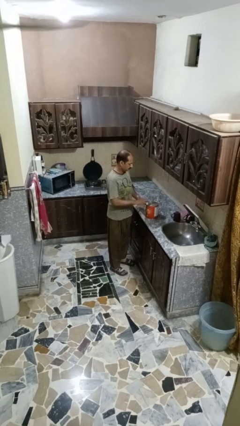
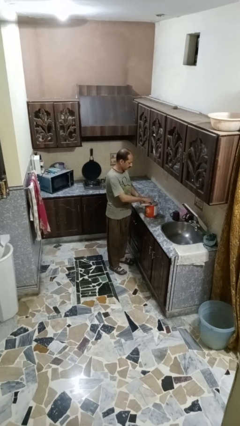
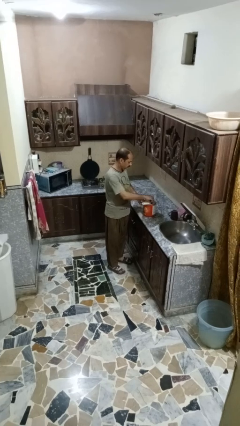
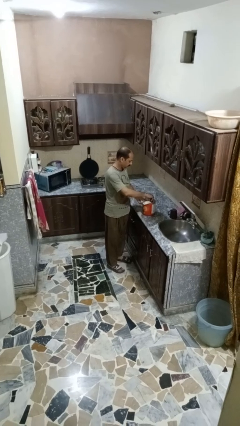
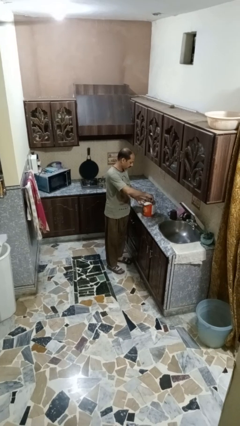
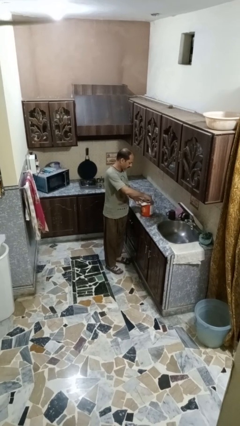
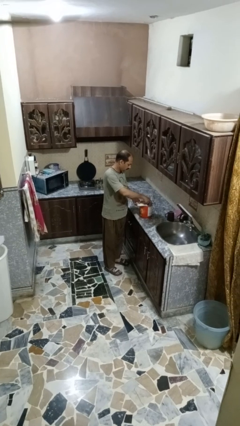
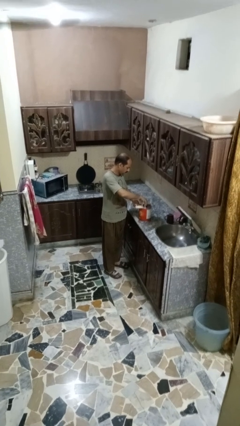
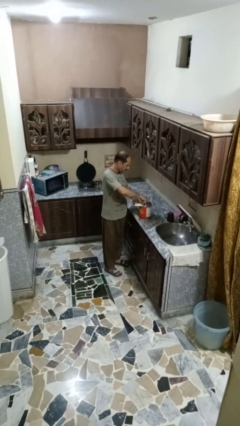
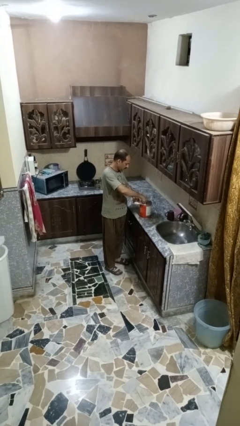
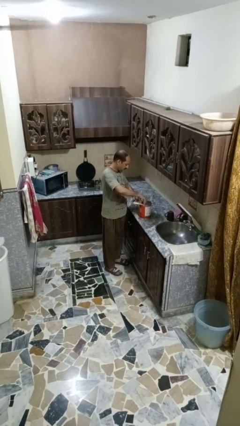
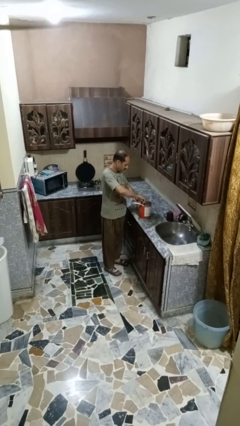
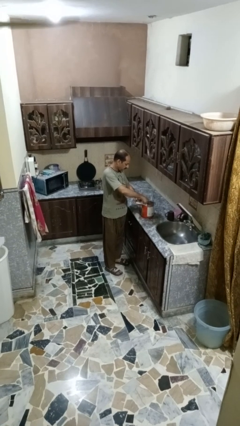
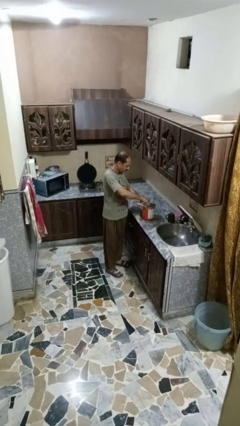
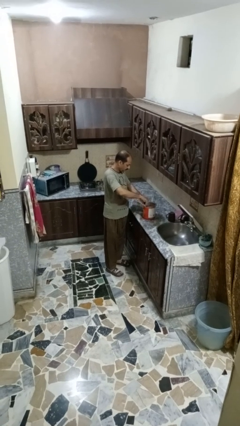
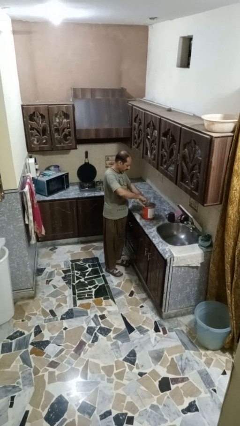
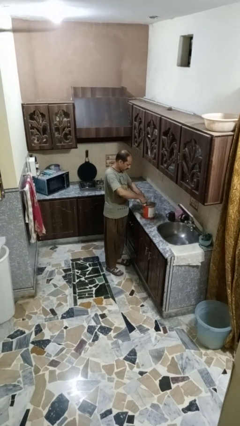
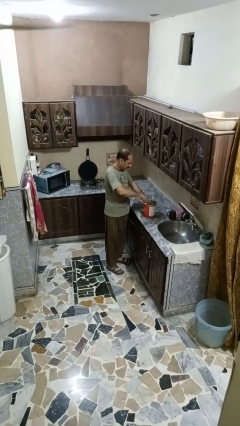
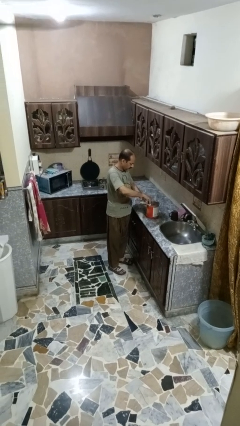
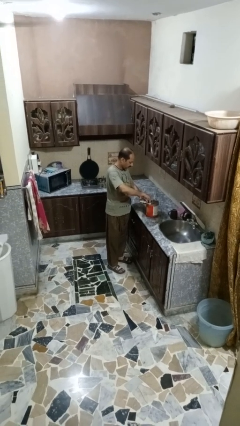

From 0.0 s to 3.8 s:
person opens can with can opener

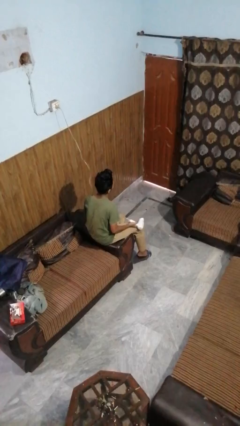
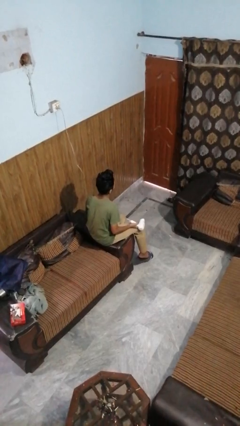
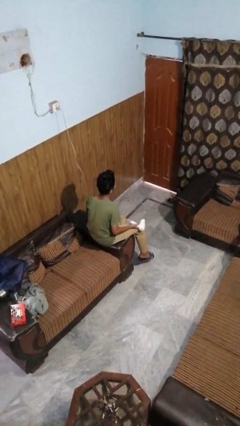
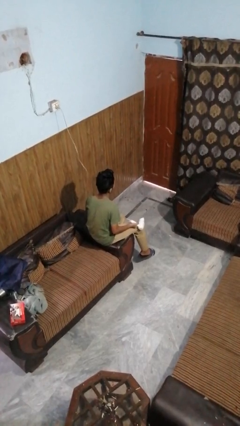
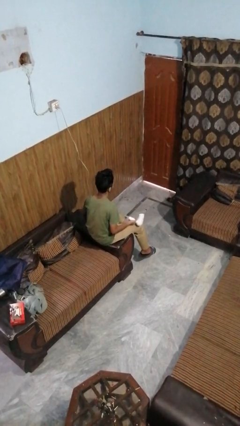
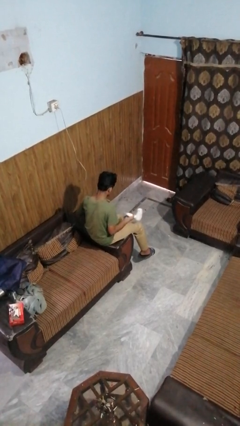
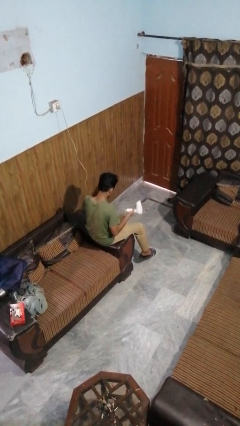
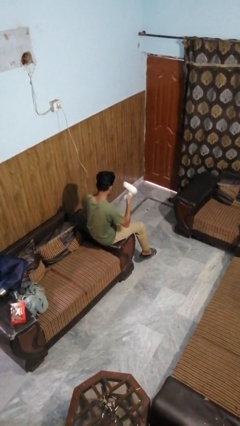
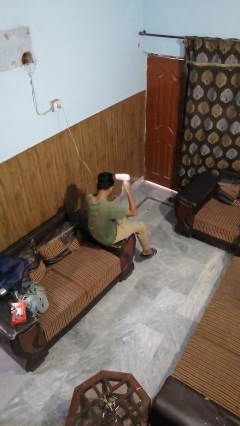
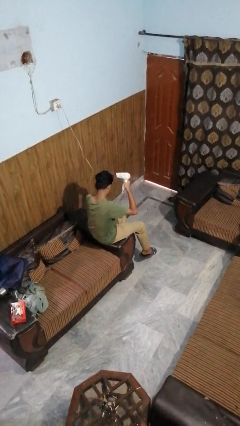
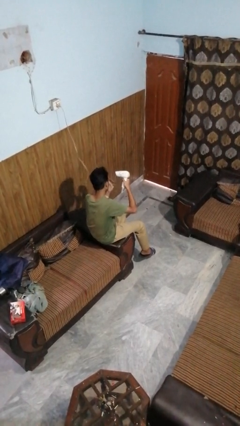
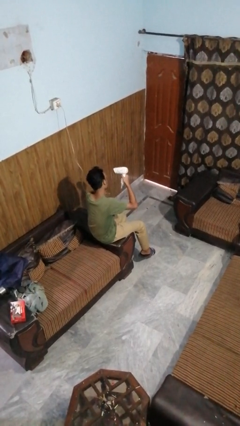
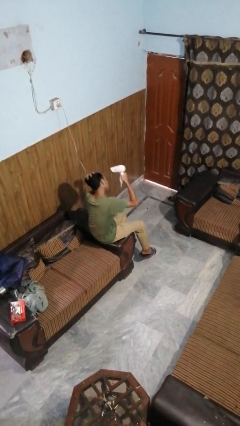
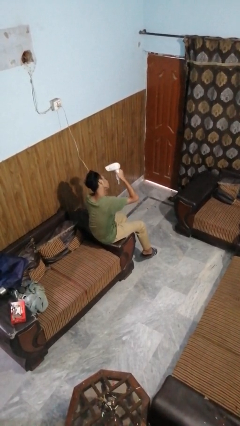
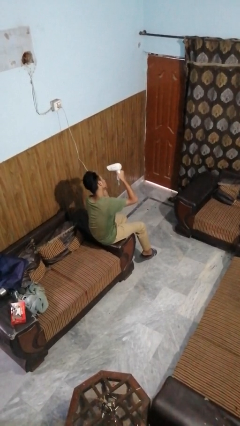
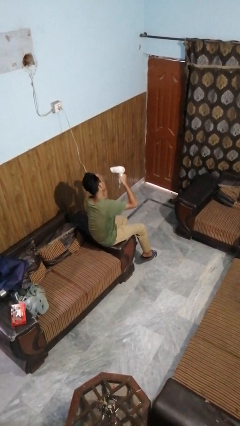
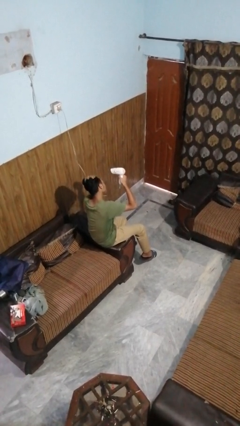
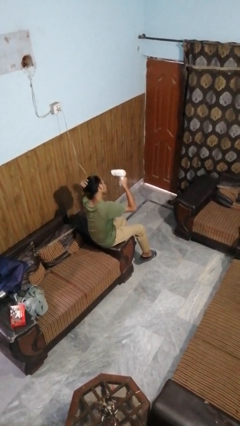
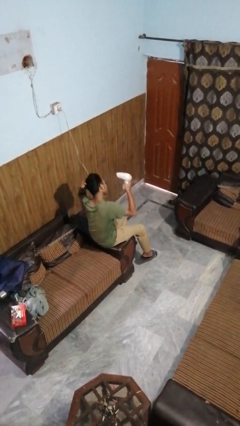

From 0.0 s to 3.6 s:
person dries hair with hairdryer

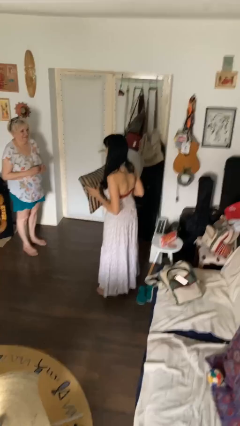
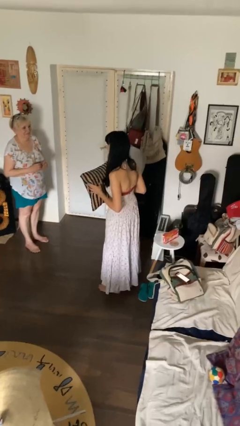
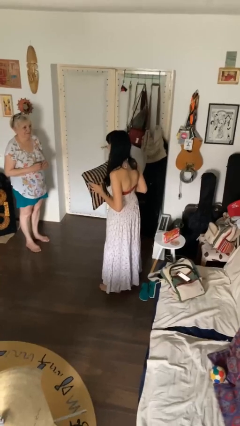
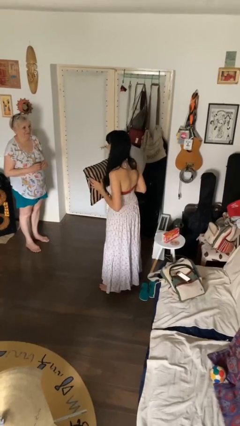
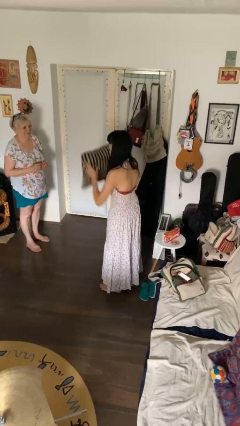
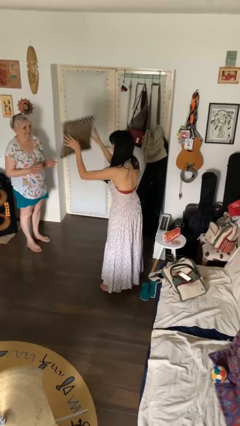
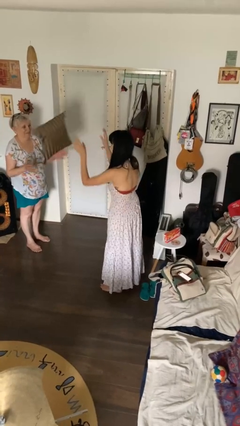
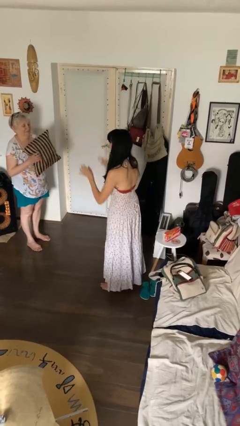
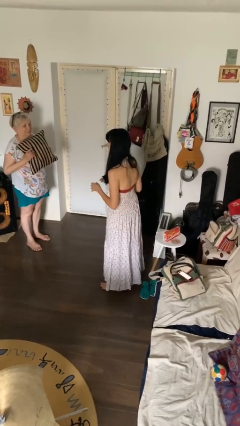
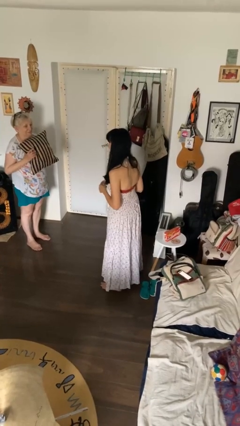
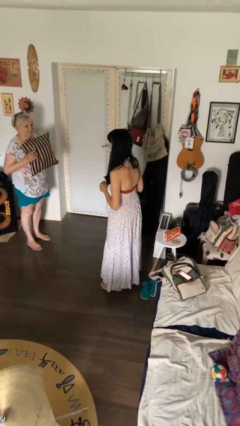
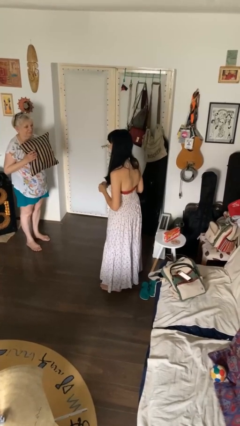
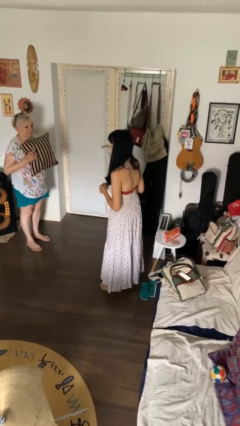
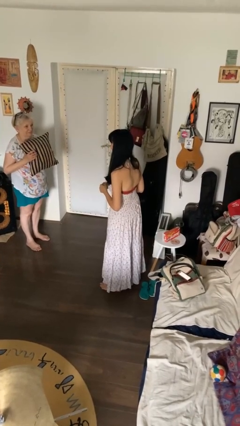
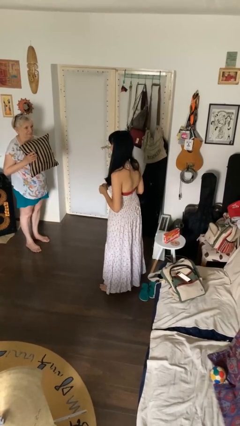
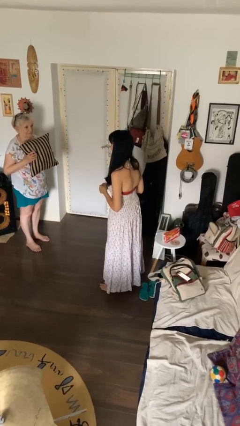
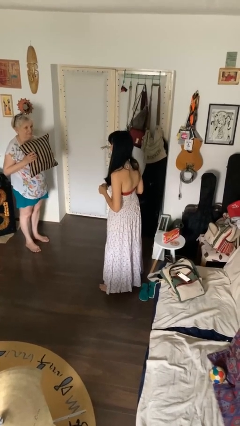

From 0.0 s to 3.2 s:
person throws object to person

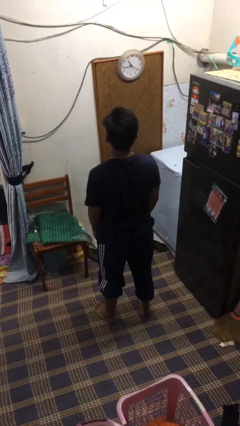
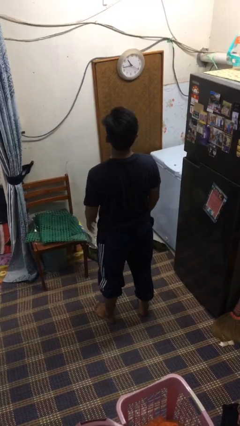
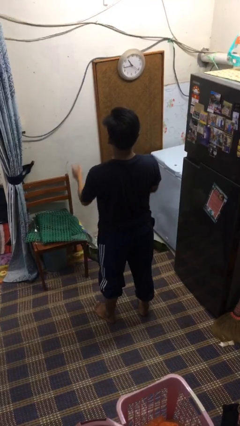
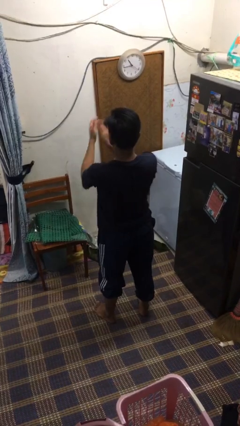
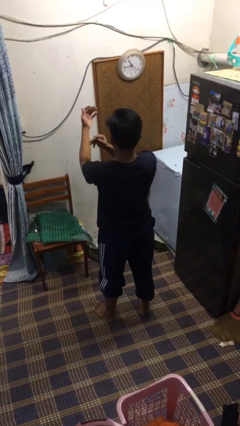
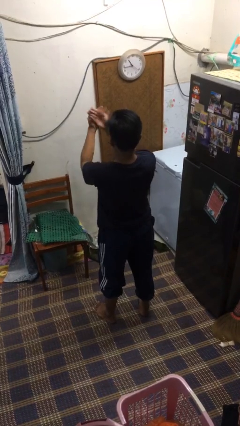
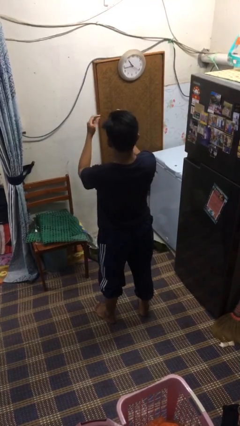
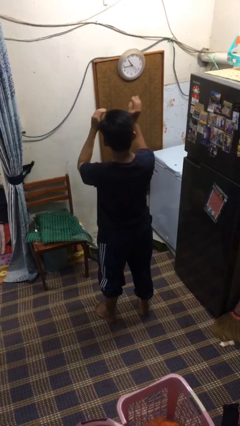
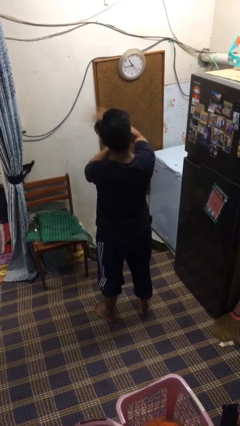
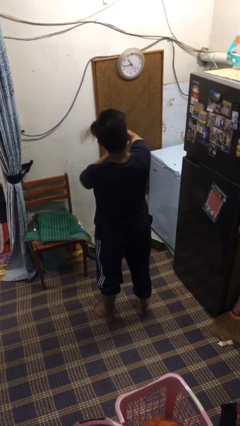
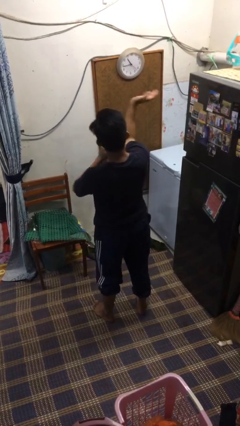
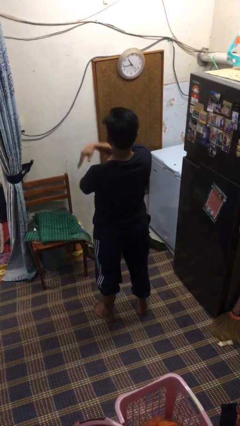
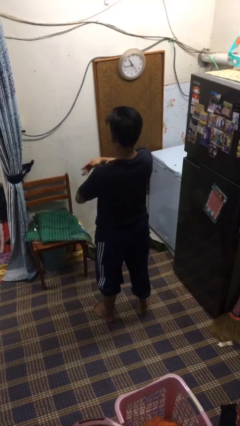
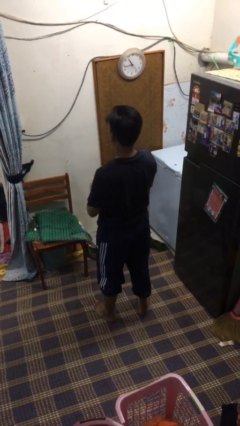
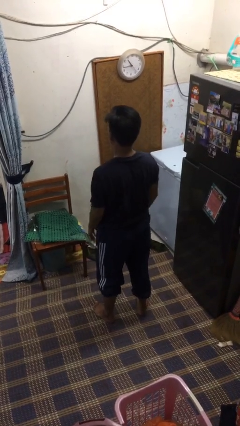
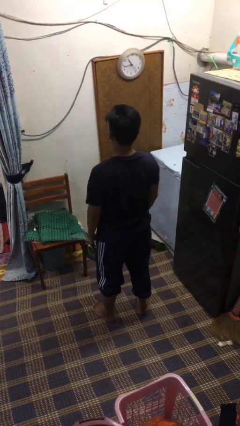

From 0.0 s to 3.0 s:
person swats bug

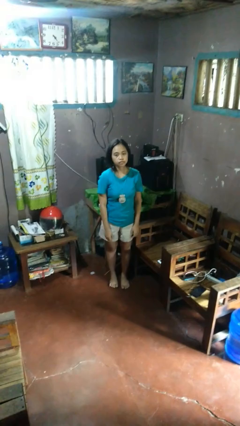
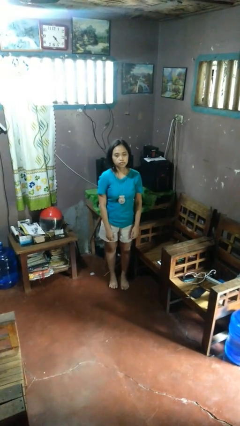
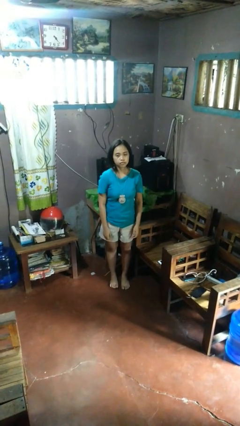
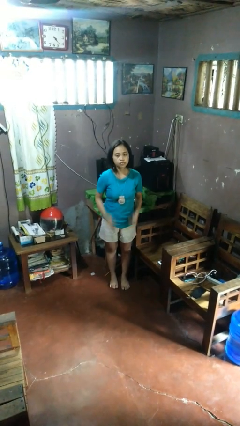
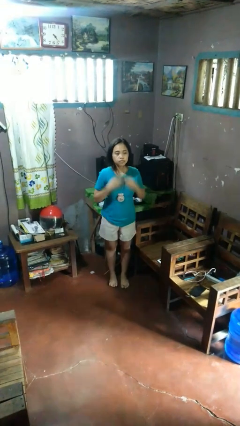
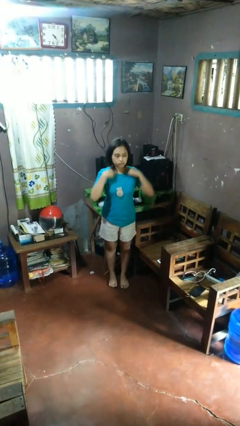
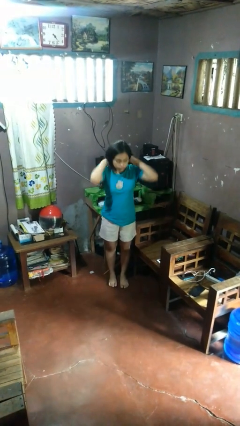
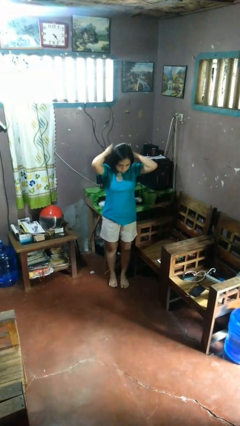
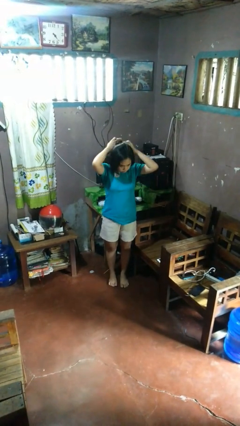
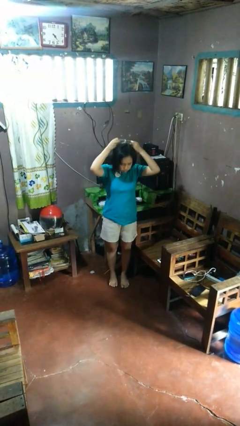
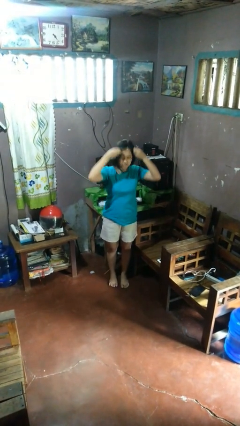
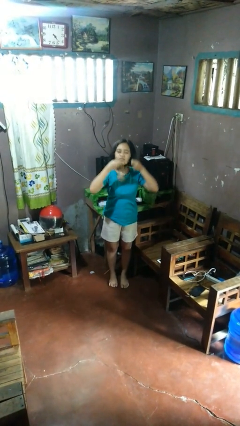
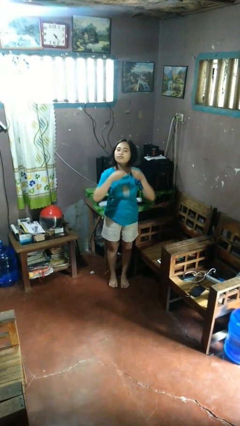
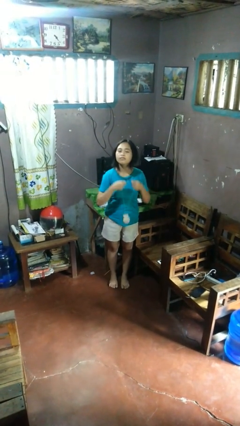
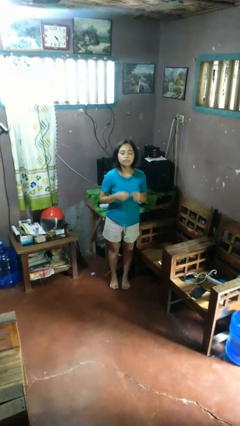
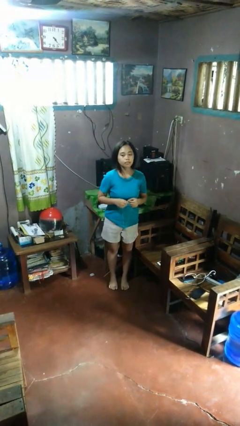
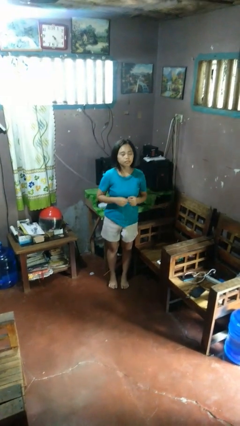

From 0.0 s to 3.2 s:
person takes off necklace

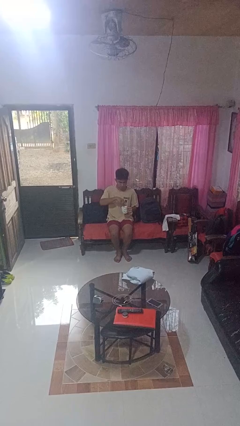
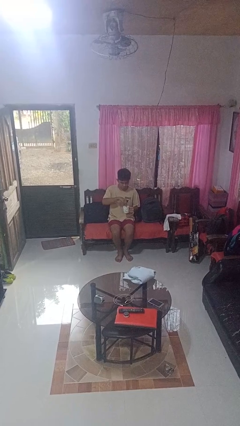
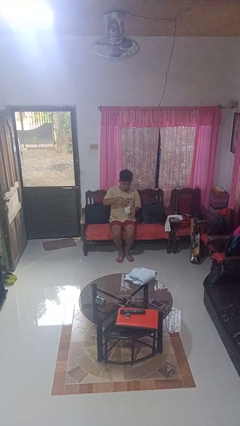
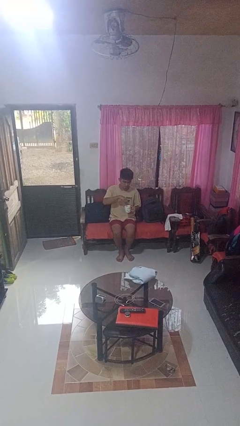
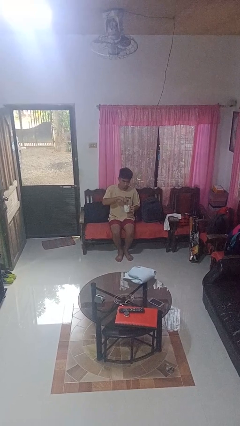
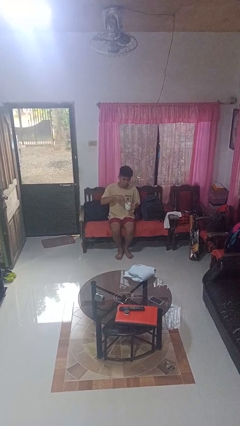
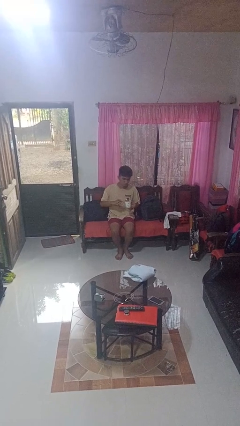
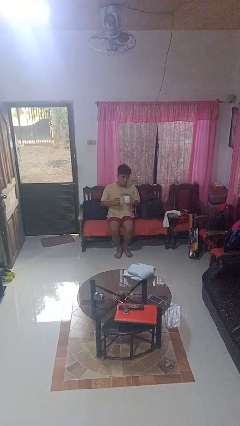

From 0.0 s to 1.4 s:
person stirs mug
